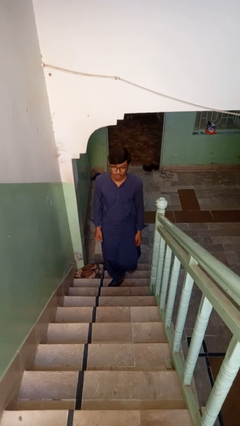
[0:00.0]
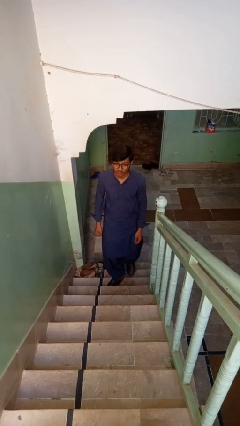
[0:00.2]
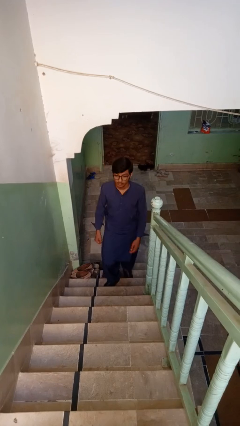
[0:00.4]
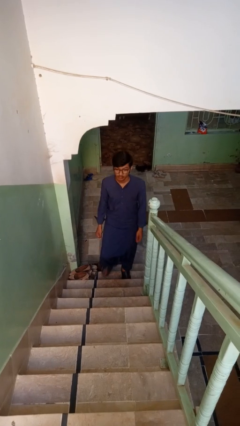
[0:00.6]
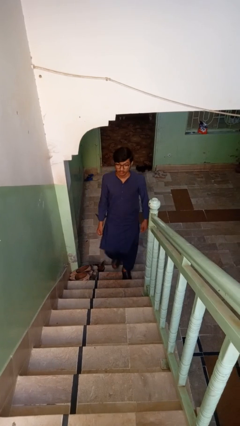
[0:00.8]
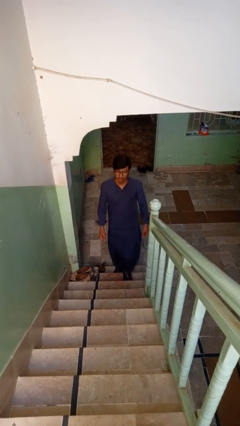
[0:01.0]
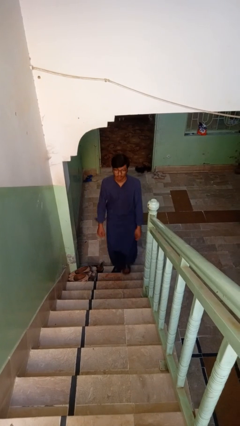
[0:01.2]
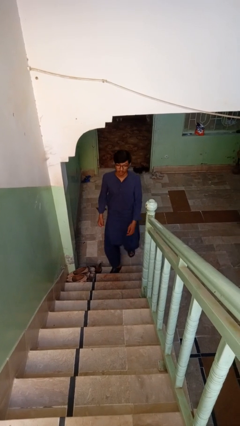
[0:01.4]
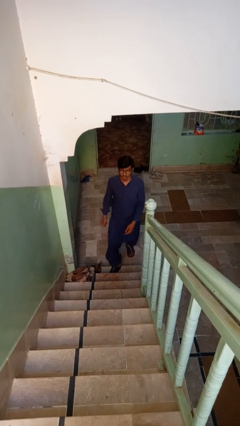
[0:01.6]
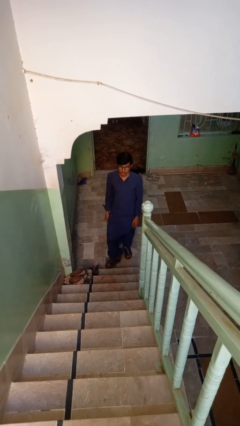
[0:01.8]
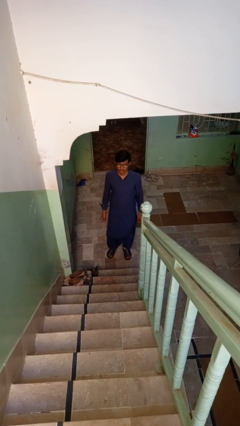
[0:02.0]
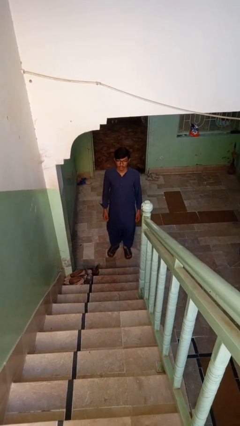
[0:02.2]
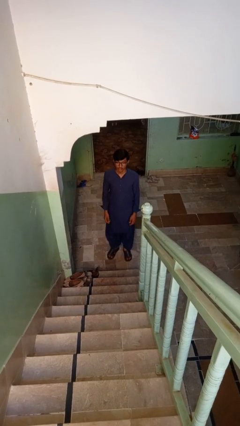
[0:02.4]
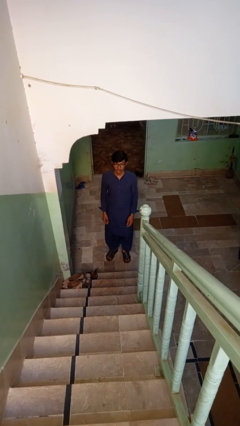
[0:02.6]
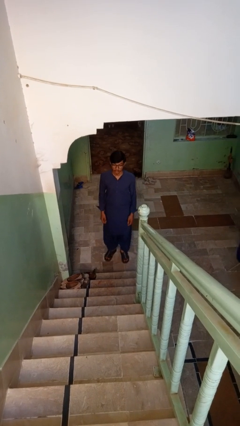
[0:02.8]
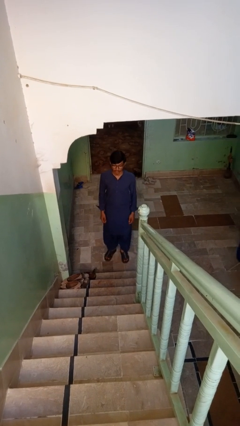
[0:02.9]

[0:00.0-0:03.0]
person climbs down stairs

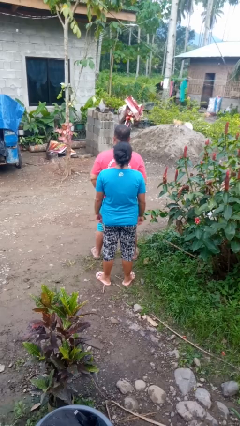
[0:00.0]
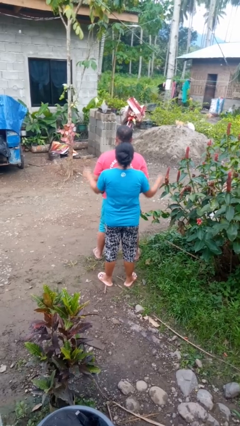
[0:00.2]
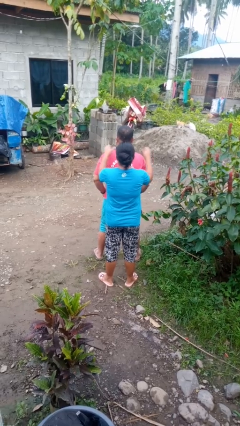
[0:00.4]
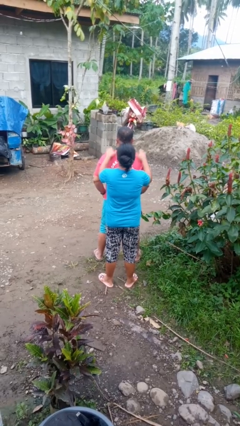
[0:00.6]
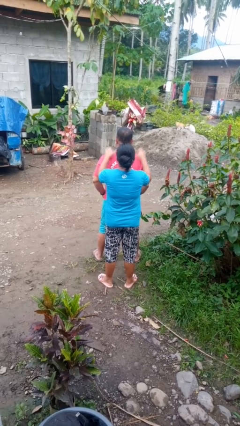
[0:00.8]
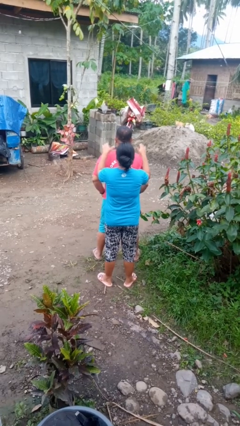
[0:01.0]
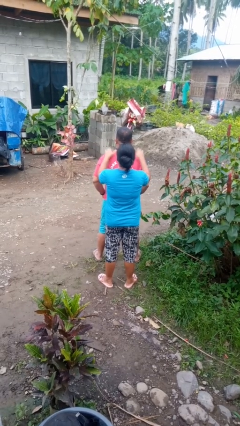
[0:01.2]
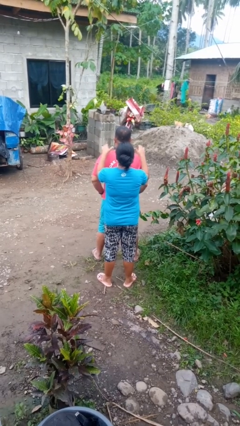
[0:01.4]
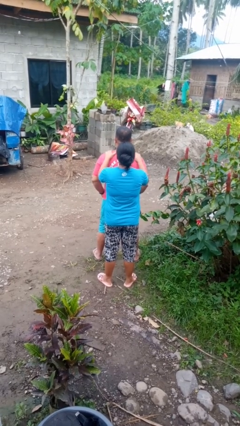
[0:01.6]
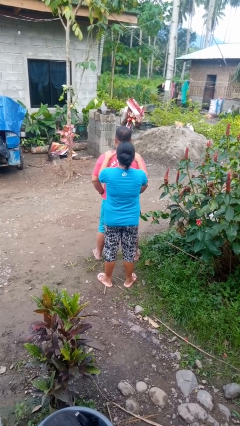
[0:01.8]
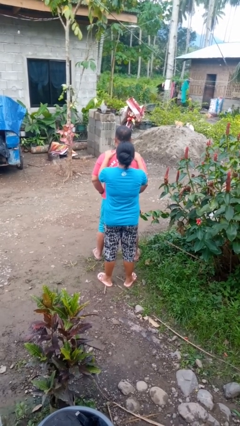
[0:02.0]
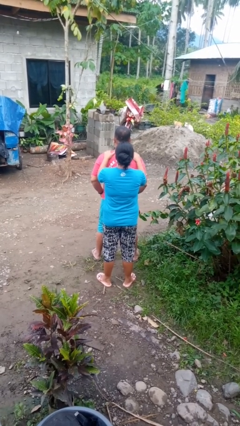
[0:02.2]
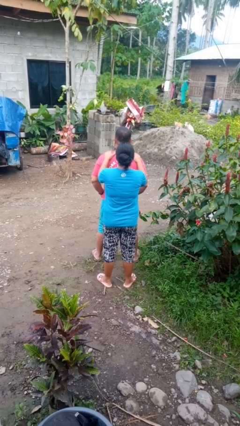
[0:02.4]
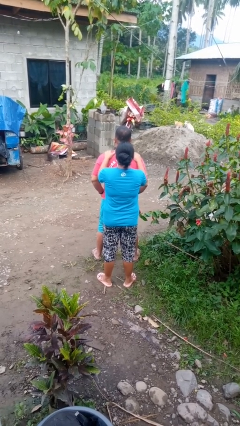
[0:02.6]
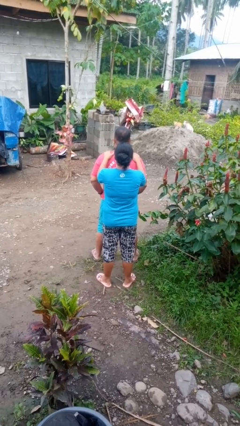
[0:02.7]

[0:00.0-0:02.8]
person pounds shoulders of person

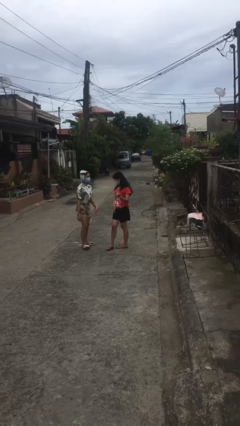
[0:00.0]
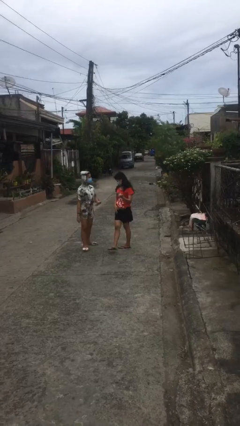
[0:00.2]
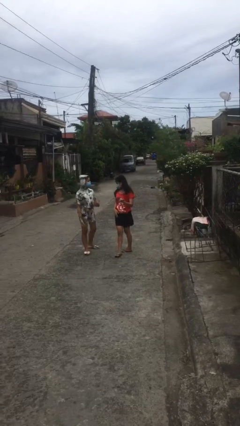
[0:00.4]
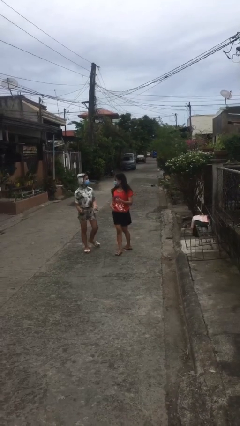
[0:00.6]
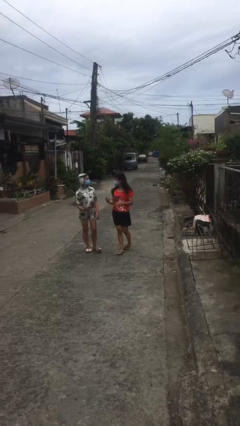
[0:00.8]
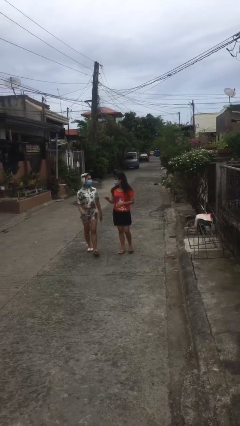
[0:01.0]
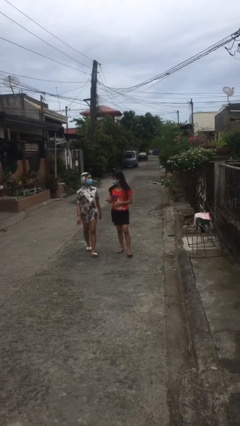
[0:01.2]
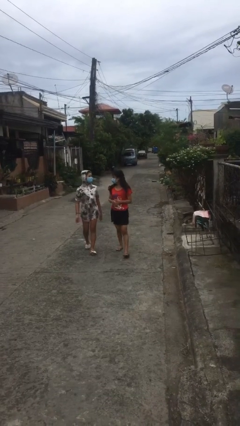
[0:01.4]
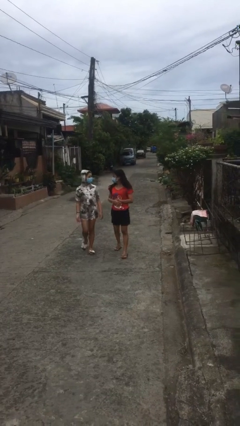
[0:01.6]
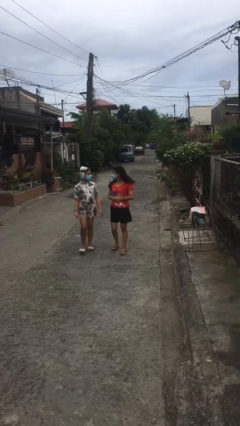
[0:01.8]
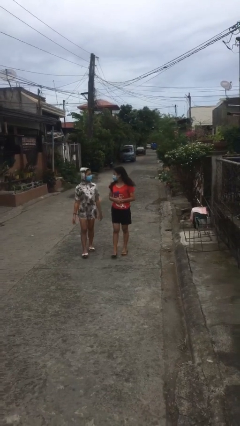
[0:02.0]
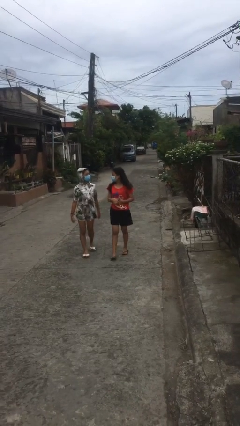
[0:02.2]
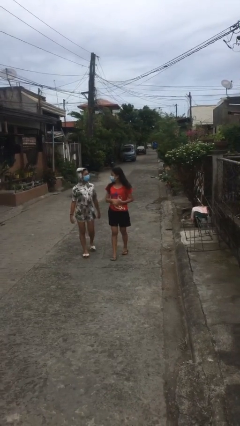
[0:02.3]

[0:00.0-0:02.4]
person talks to person

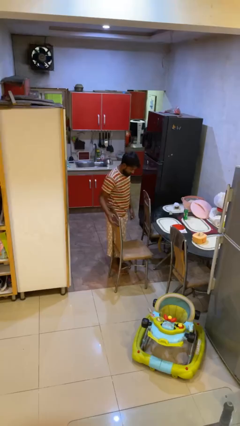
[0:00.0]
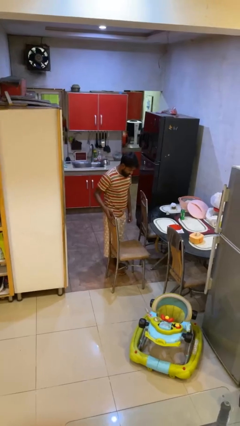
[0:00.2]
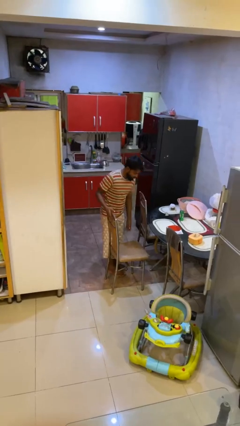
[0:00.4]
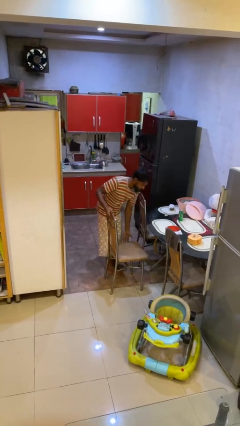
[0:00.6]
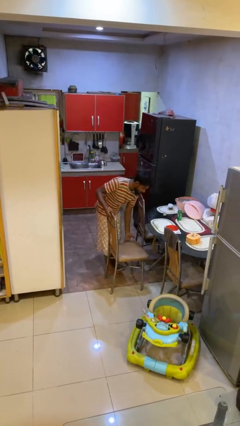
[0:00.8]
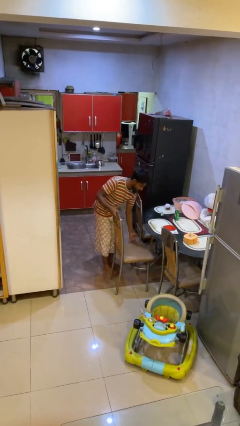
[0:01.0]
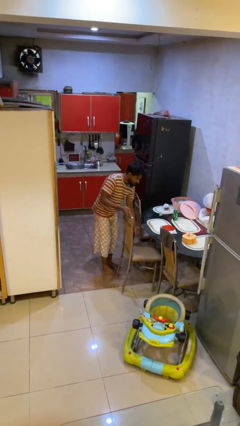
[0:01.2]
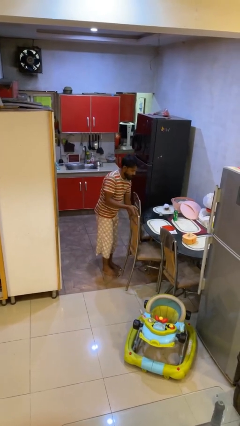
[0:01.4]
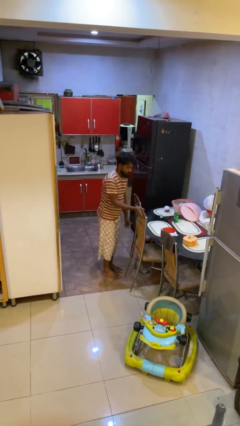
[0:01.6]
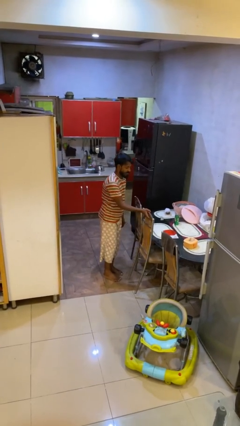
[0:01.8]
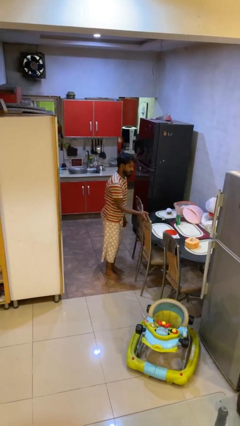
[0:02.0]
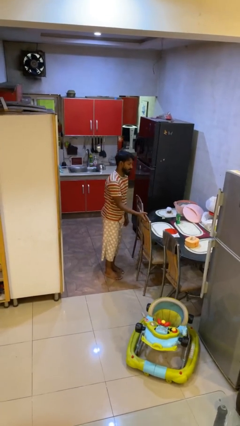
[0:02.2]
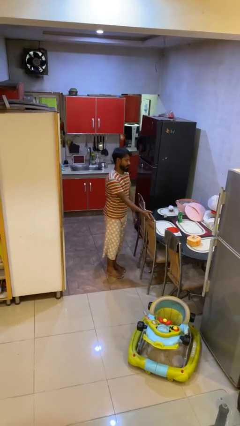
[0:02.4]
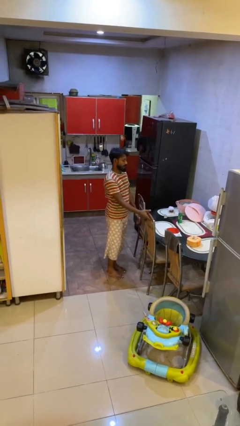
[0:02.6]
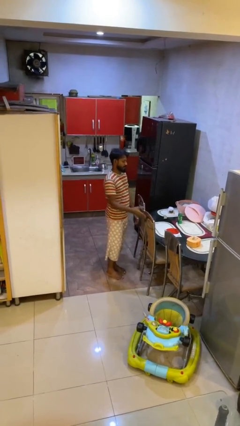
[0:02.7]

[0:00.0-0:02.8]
person pushes in chair

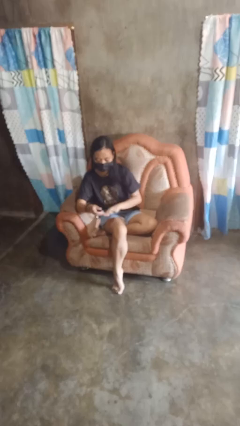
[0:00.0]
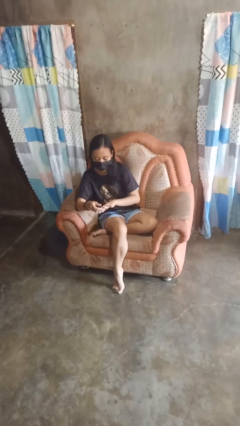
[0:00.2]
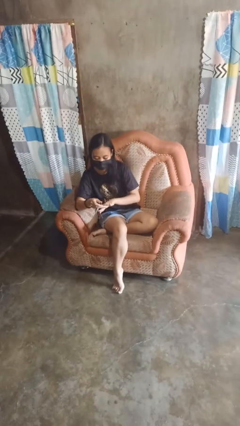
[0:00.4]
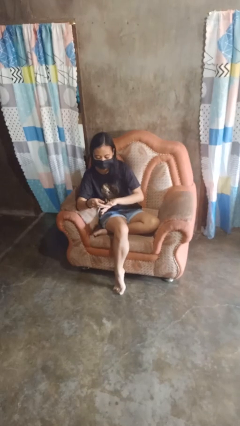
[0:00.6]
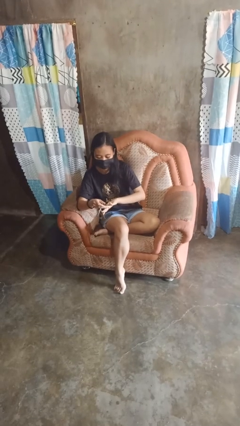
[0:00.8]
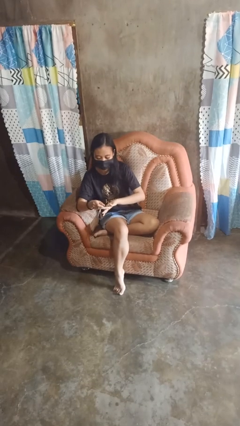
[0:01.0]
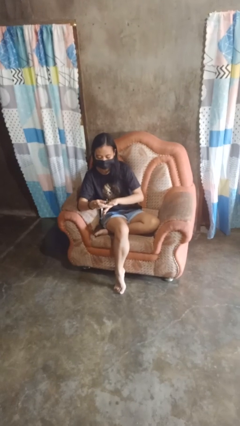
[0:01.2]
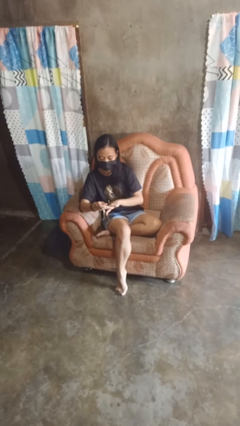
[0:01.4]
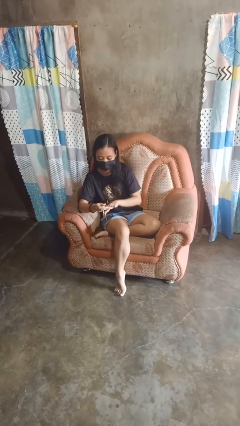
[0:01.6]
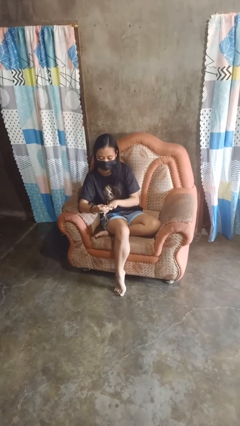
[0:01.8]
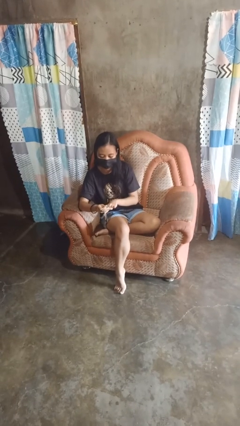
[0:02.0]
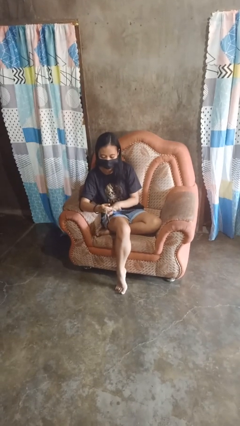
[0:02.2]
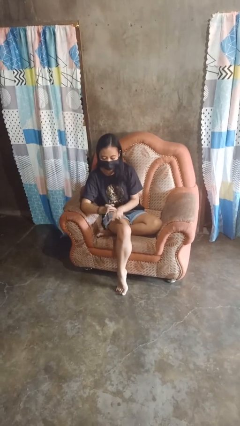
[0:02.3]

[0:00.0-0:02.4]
person clips fingernails

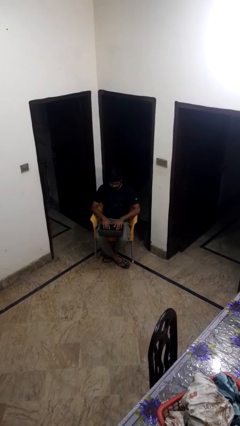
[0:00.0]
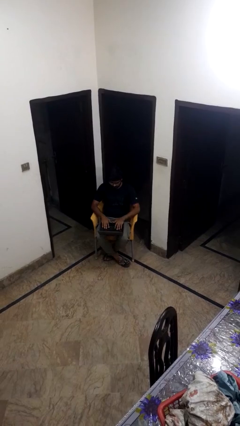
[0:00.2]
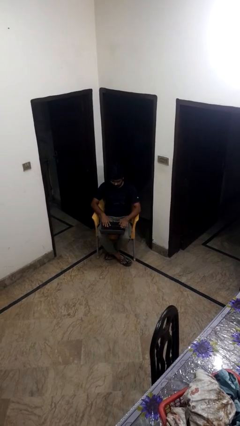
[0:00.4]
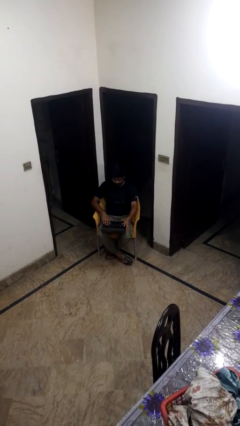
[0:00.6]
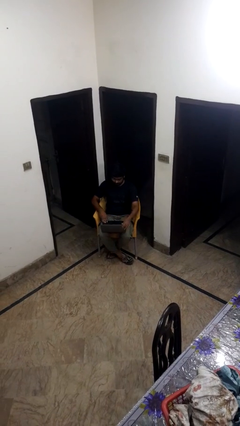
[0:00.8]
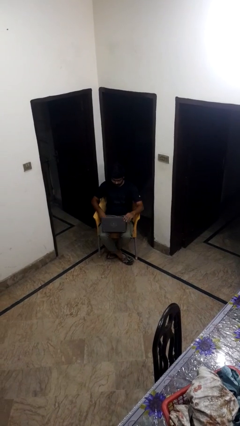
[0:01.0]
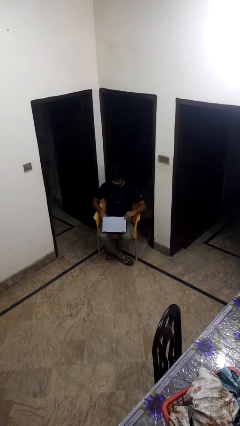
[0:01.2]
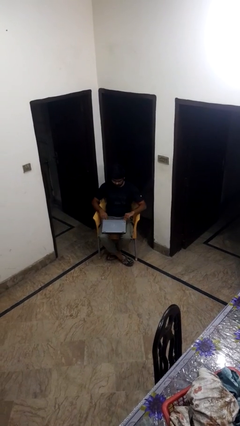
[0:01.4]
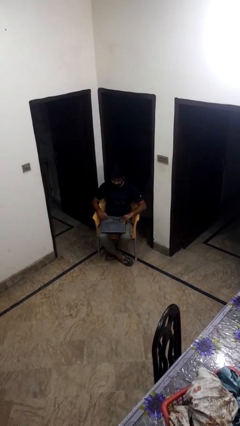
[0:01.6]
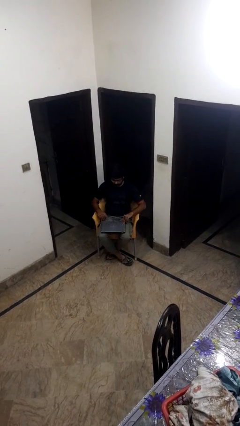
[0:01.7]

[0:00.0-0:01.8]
person closes laptop

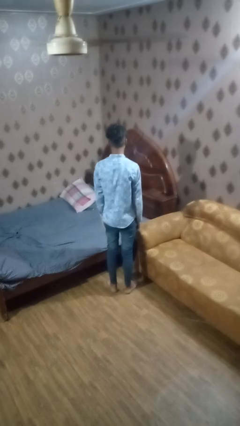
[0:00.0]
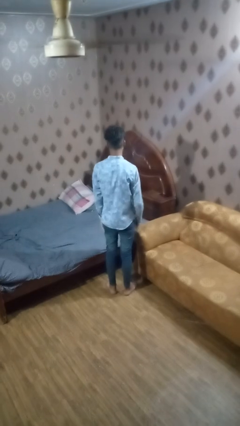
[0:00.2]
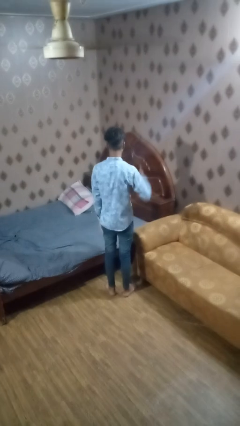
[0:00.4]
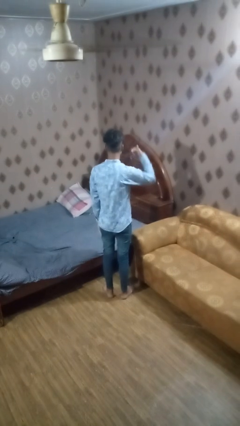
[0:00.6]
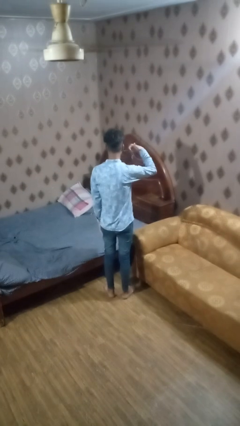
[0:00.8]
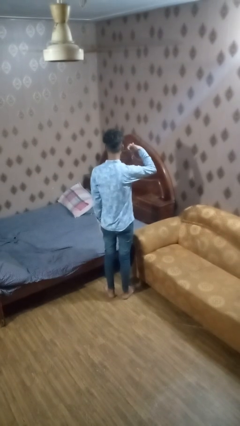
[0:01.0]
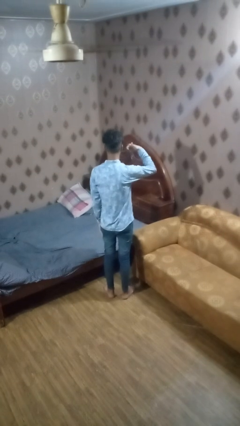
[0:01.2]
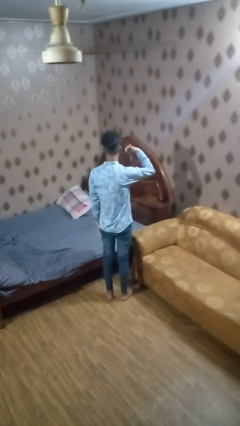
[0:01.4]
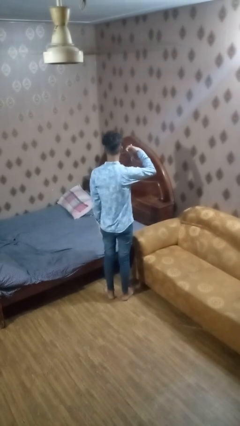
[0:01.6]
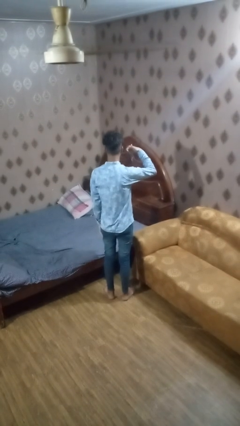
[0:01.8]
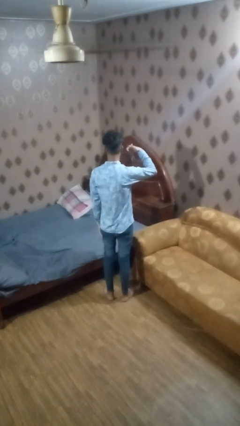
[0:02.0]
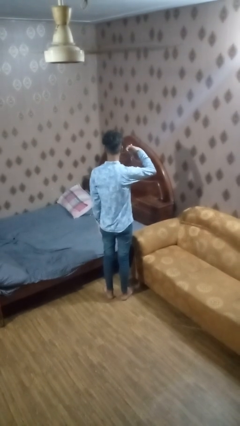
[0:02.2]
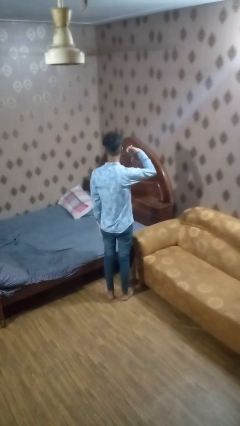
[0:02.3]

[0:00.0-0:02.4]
person gestures call me
